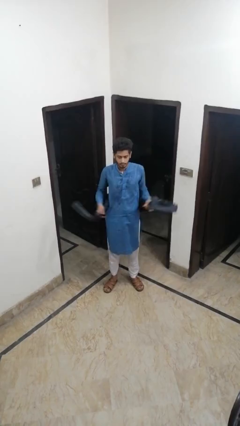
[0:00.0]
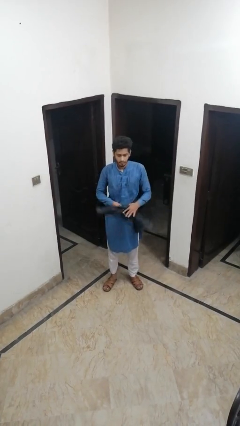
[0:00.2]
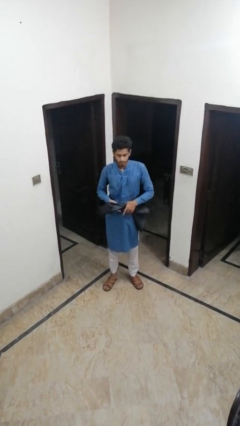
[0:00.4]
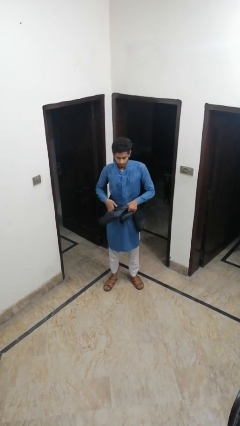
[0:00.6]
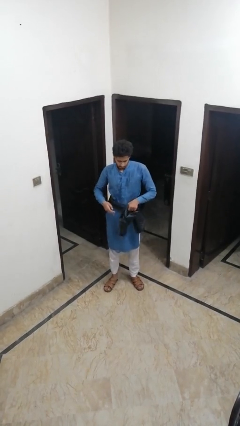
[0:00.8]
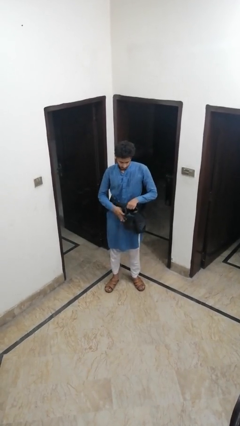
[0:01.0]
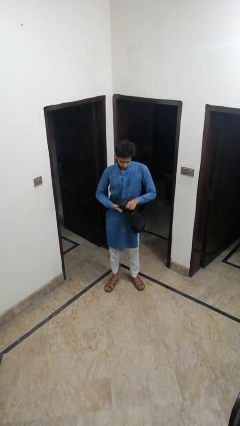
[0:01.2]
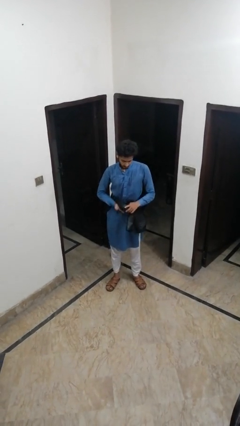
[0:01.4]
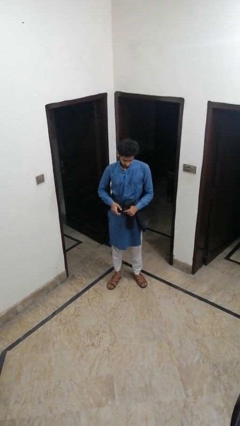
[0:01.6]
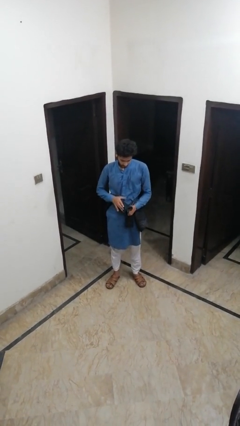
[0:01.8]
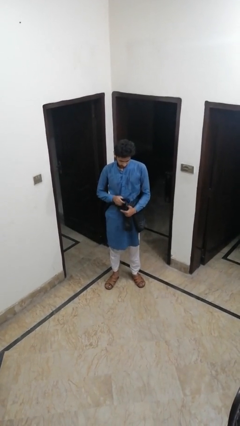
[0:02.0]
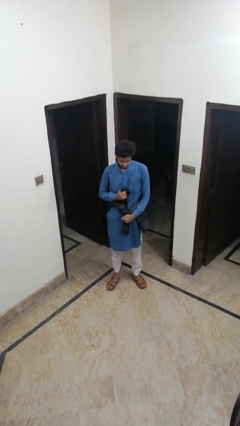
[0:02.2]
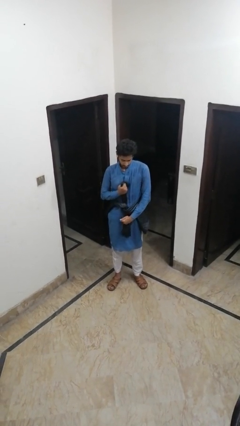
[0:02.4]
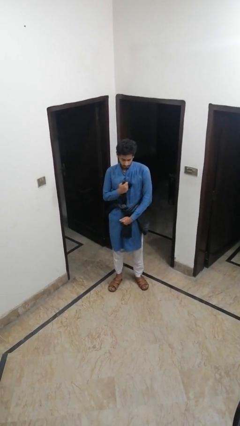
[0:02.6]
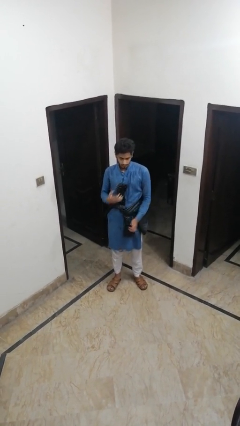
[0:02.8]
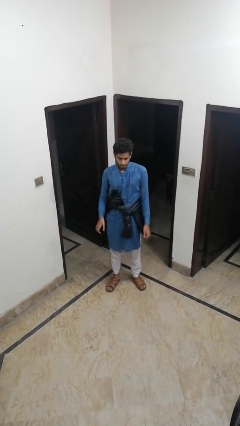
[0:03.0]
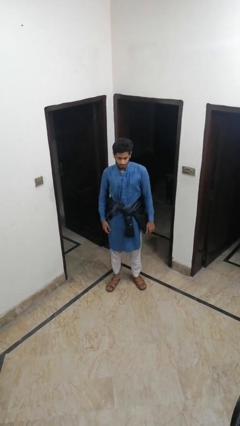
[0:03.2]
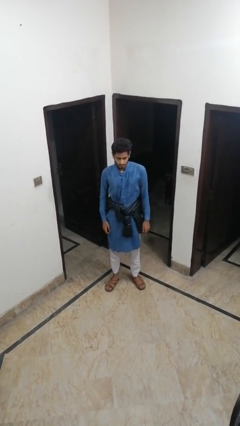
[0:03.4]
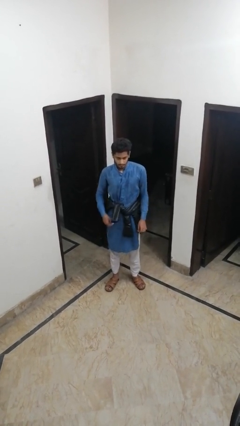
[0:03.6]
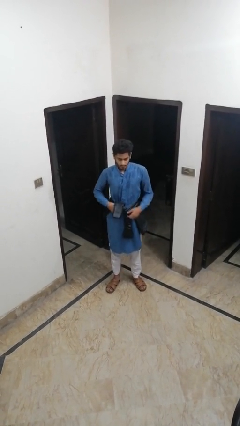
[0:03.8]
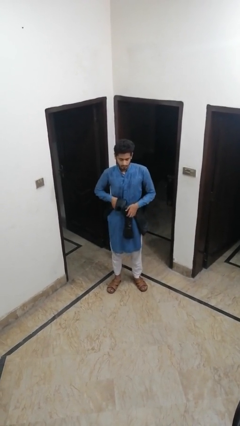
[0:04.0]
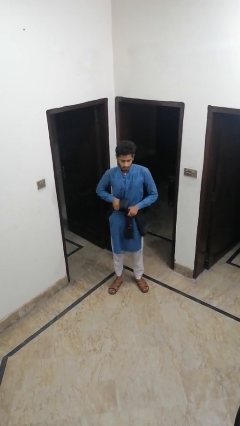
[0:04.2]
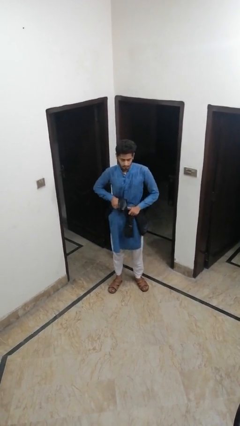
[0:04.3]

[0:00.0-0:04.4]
person ties jacket around waist

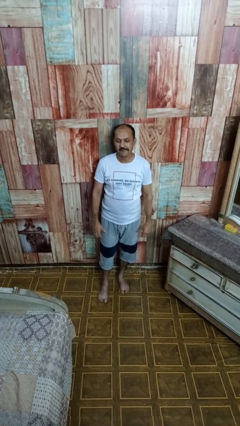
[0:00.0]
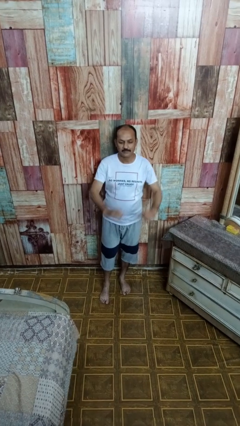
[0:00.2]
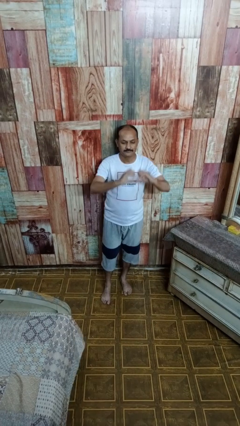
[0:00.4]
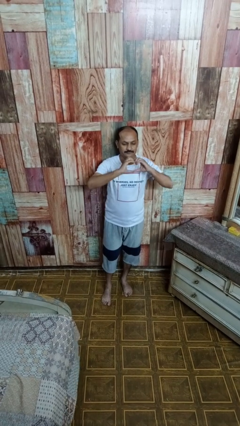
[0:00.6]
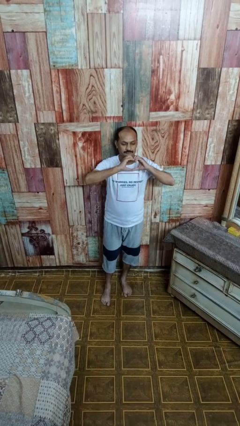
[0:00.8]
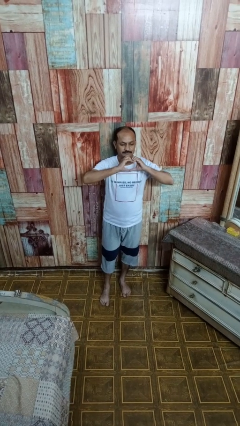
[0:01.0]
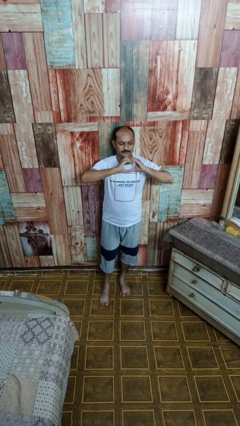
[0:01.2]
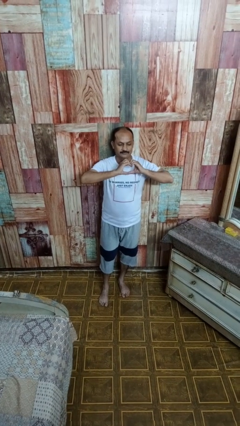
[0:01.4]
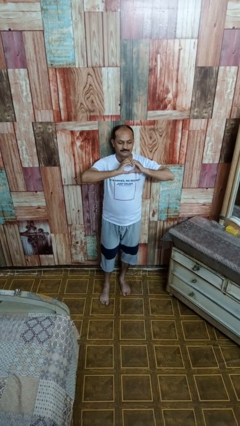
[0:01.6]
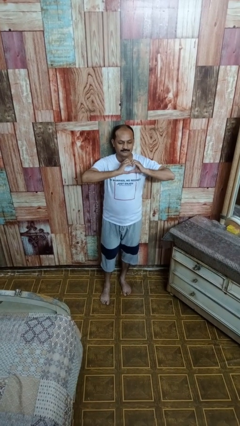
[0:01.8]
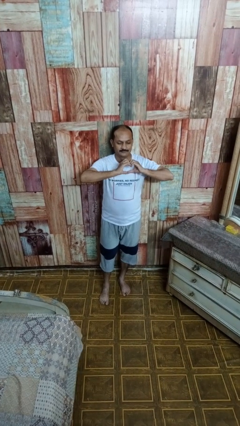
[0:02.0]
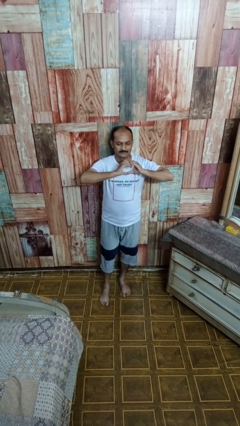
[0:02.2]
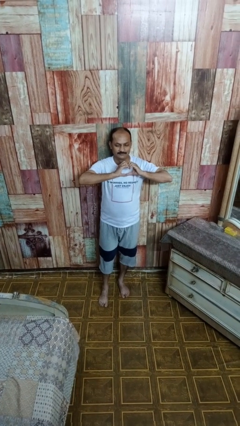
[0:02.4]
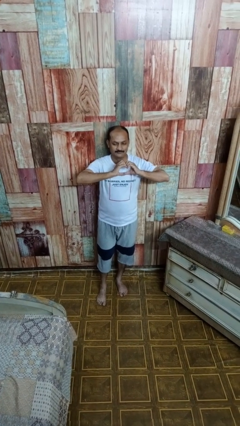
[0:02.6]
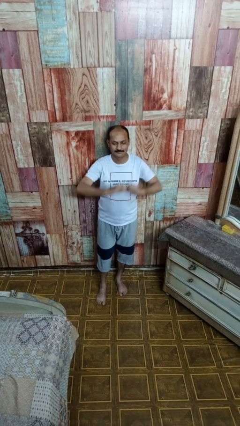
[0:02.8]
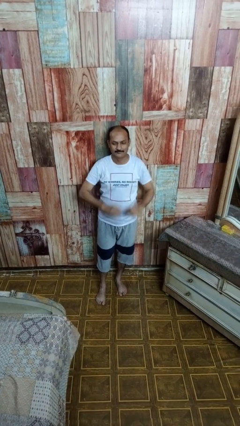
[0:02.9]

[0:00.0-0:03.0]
person gestures heart

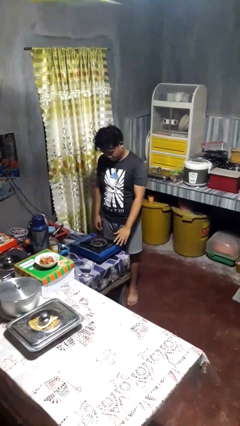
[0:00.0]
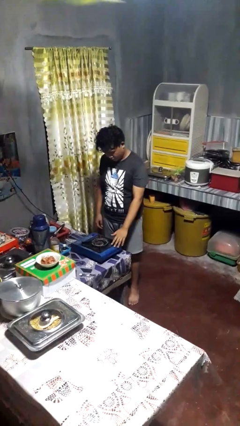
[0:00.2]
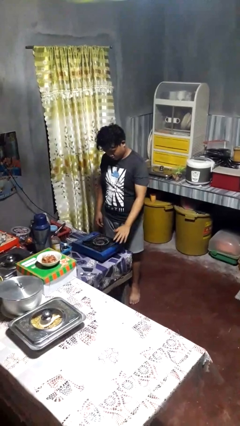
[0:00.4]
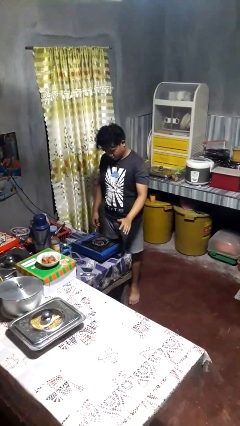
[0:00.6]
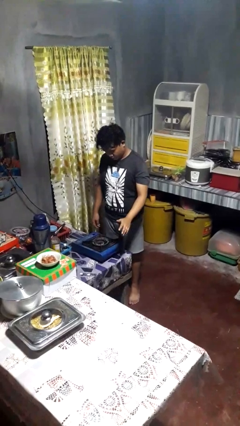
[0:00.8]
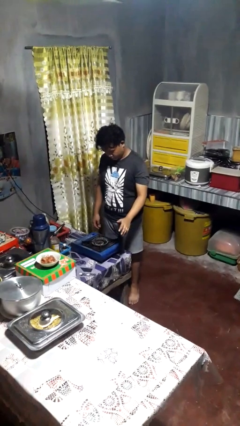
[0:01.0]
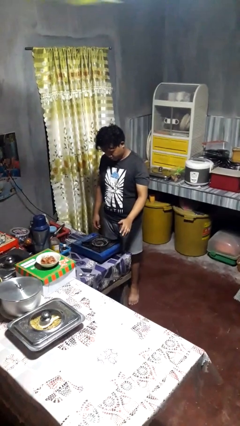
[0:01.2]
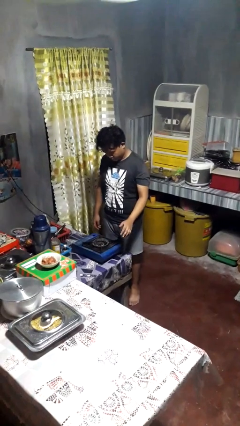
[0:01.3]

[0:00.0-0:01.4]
person burns hand

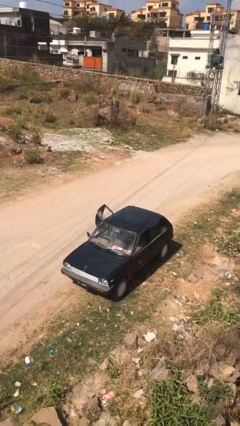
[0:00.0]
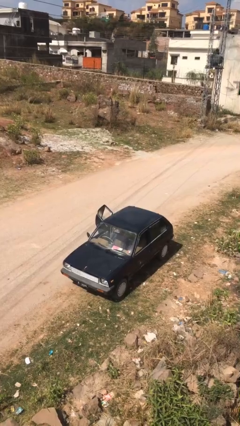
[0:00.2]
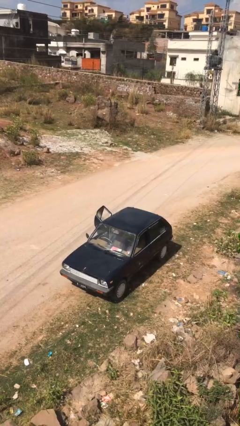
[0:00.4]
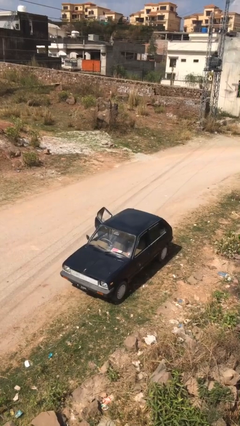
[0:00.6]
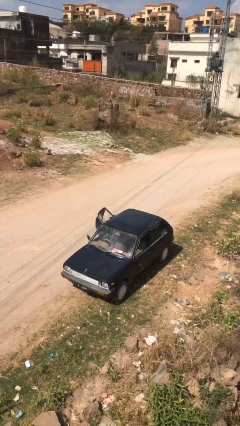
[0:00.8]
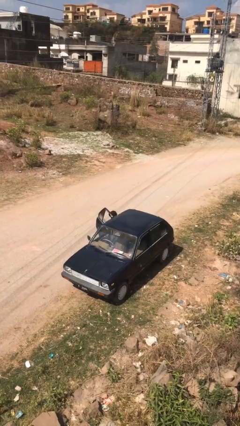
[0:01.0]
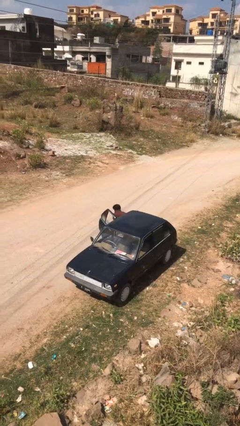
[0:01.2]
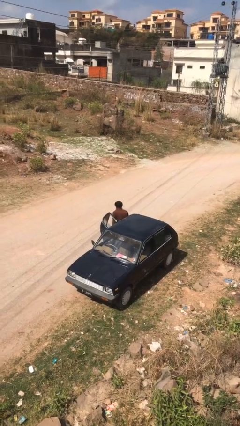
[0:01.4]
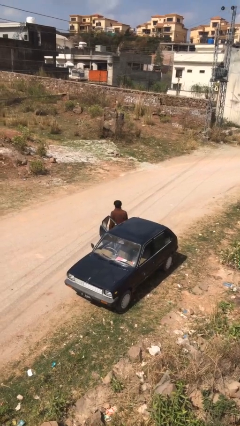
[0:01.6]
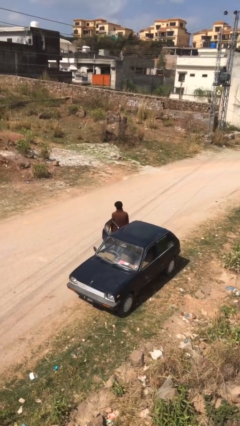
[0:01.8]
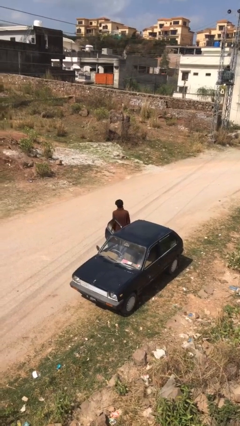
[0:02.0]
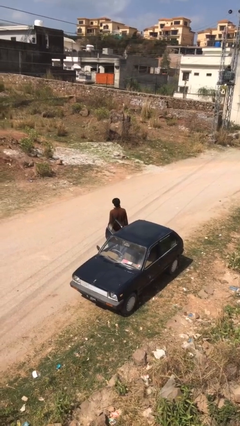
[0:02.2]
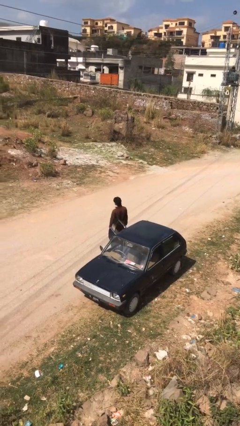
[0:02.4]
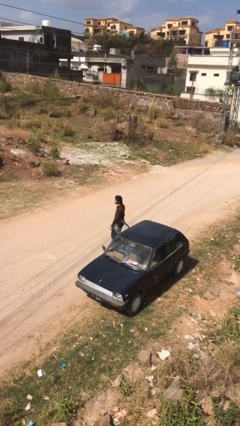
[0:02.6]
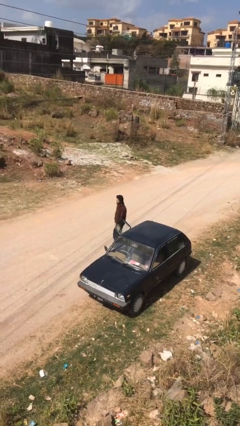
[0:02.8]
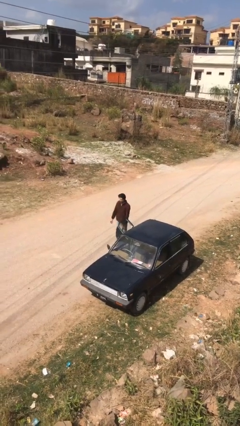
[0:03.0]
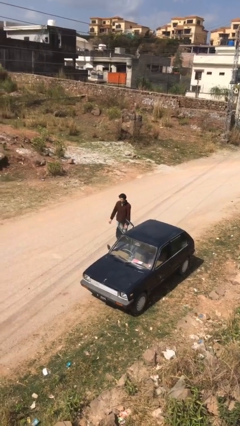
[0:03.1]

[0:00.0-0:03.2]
person exits car

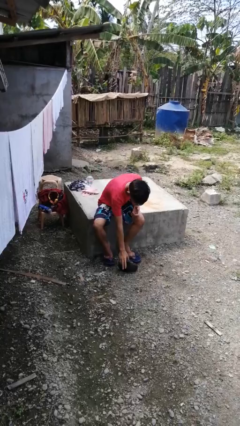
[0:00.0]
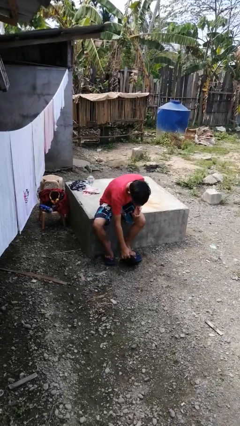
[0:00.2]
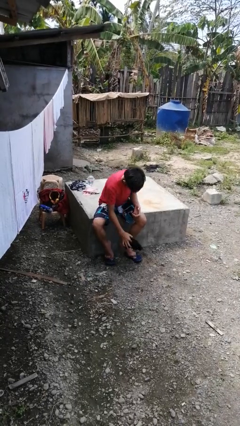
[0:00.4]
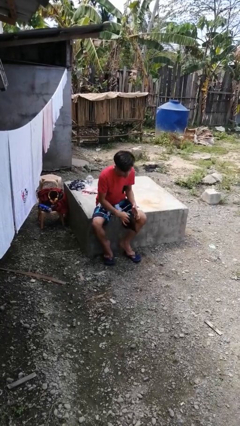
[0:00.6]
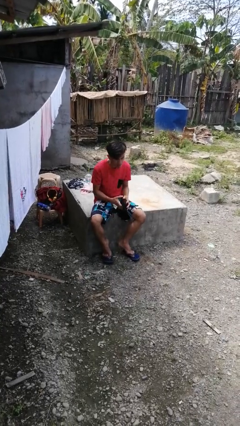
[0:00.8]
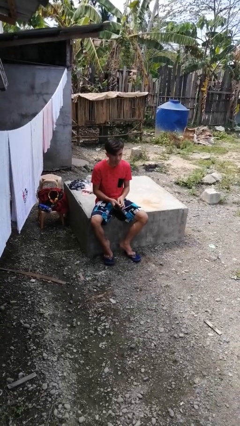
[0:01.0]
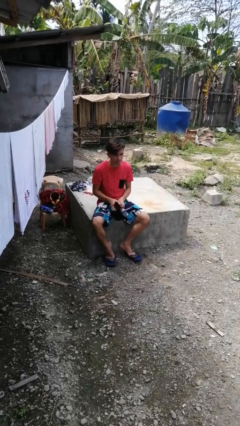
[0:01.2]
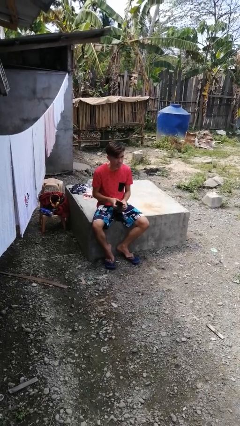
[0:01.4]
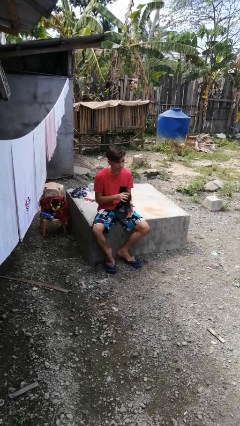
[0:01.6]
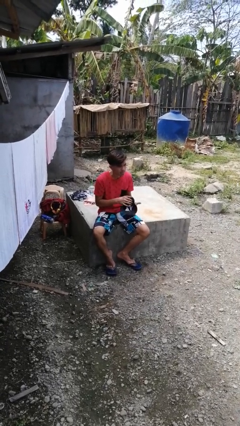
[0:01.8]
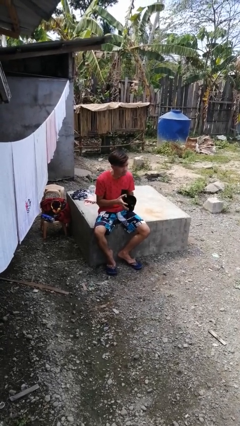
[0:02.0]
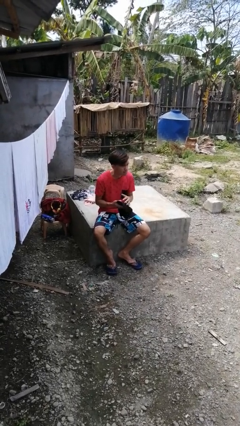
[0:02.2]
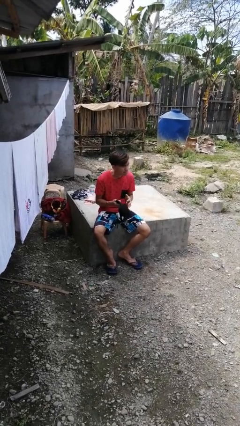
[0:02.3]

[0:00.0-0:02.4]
person picks up object from floor

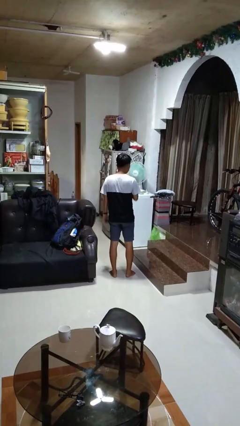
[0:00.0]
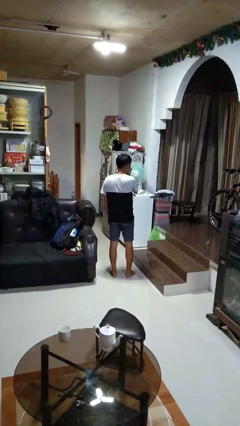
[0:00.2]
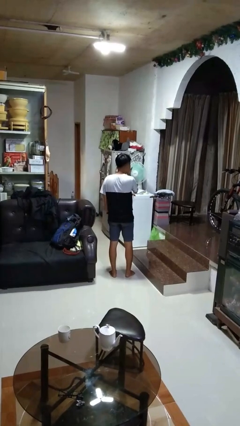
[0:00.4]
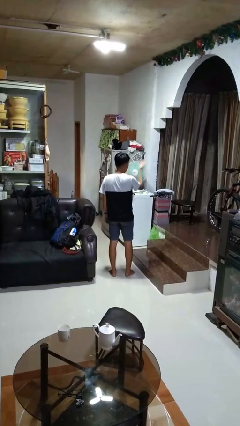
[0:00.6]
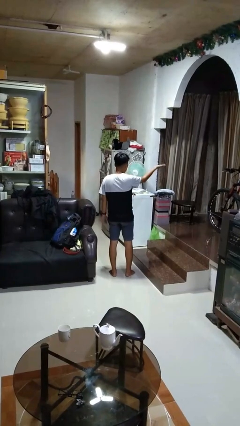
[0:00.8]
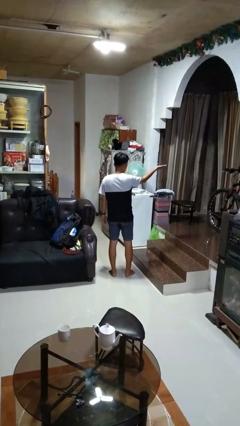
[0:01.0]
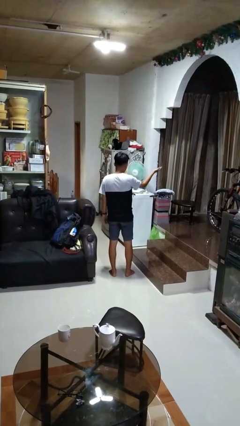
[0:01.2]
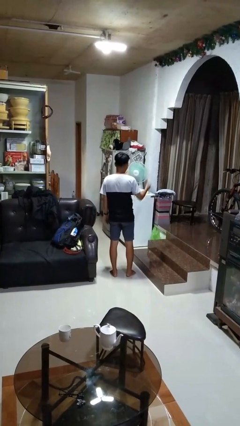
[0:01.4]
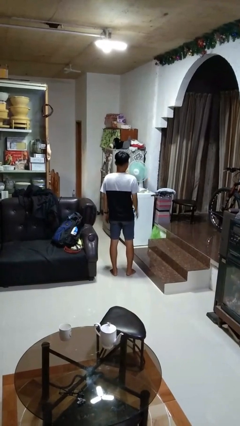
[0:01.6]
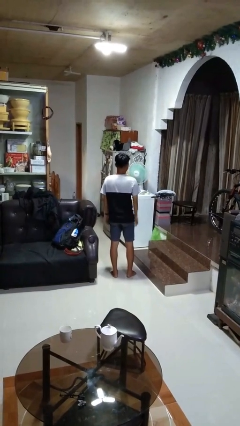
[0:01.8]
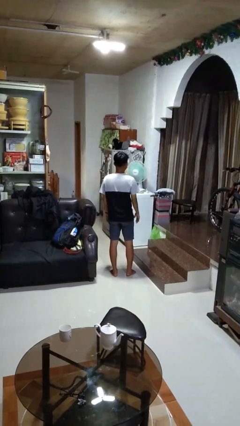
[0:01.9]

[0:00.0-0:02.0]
person gestures blow kiss

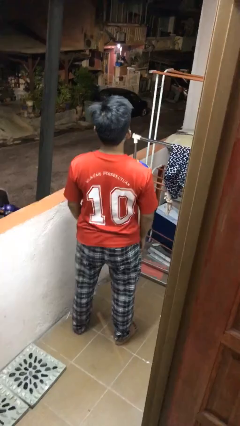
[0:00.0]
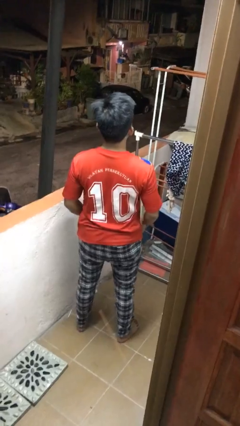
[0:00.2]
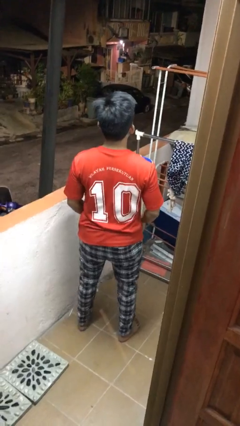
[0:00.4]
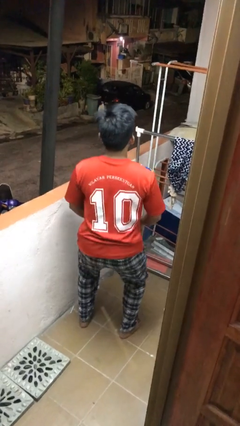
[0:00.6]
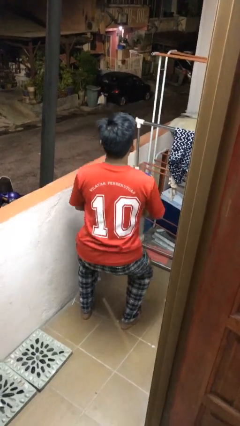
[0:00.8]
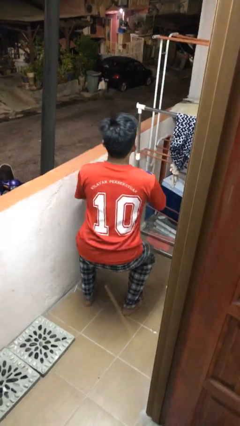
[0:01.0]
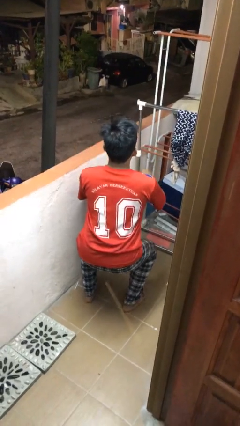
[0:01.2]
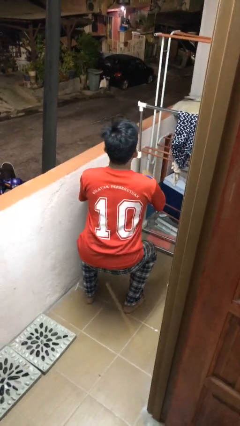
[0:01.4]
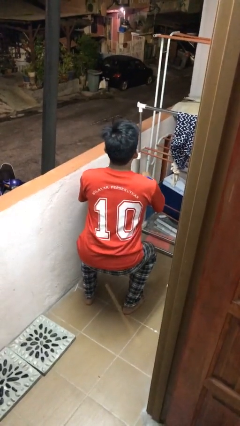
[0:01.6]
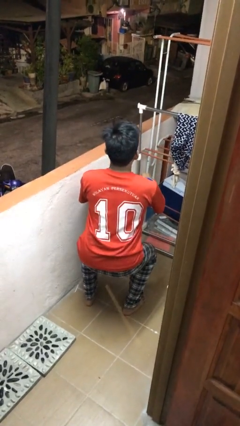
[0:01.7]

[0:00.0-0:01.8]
person squats
